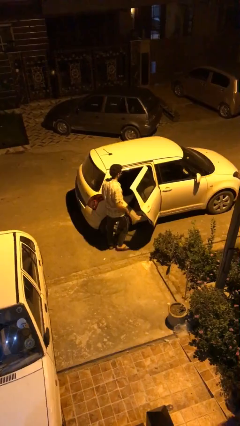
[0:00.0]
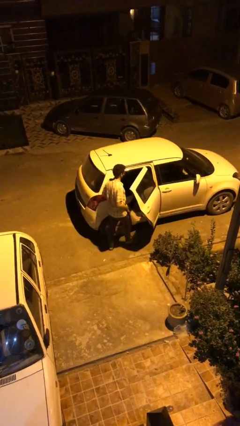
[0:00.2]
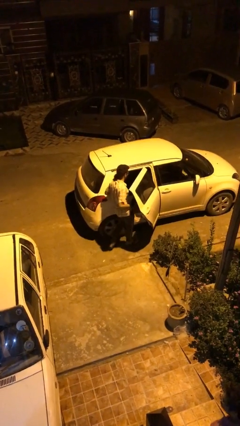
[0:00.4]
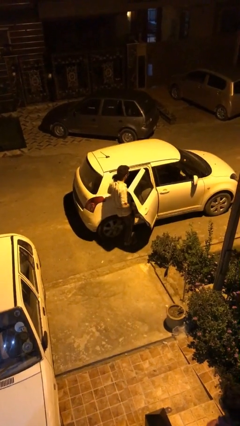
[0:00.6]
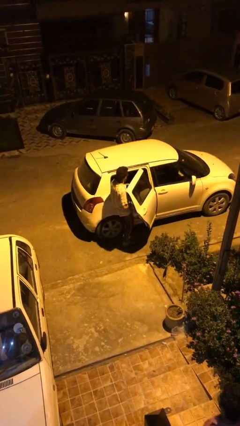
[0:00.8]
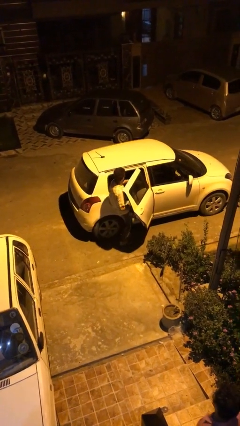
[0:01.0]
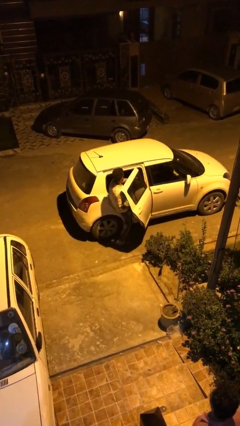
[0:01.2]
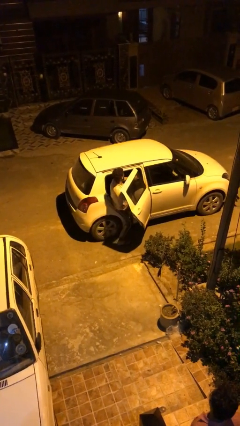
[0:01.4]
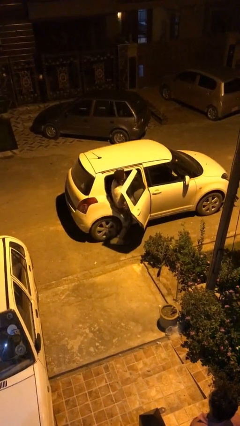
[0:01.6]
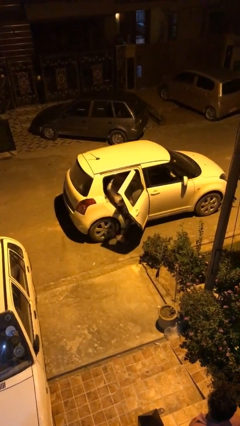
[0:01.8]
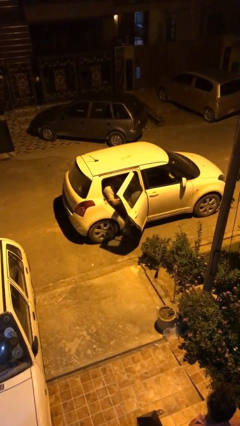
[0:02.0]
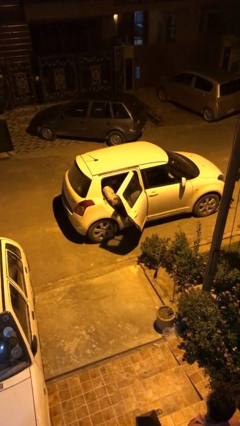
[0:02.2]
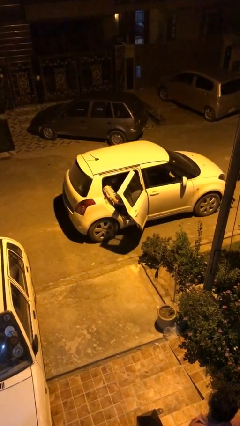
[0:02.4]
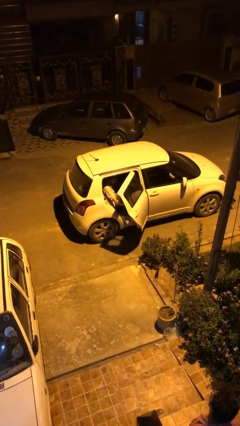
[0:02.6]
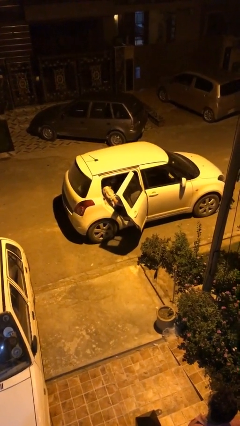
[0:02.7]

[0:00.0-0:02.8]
person enters car

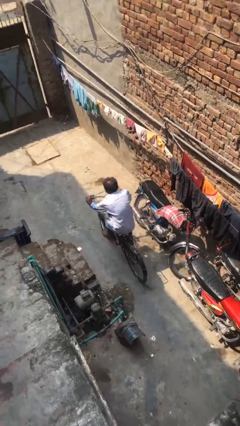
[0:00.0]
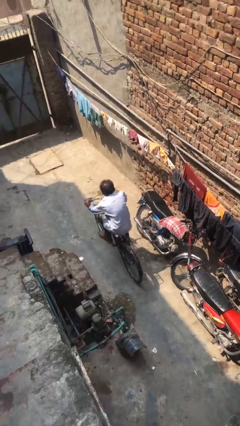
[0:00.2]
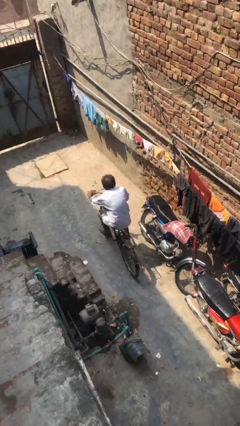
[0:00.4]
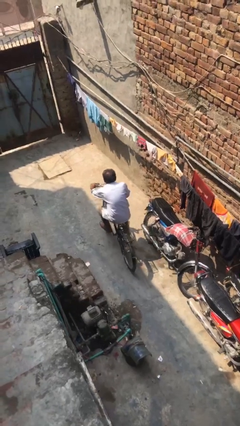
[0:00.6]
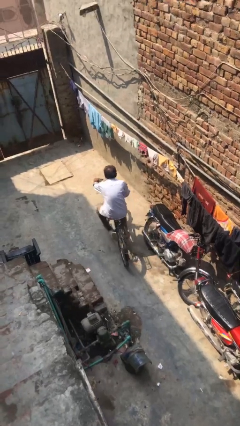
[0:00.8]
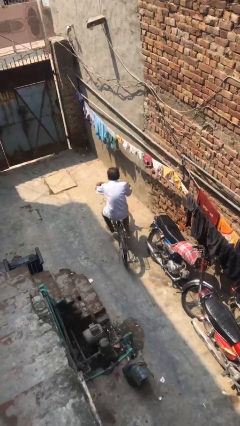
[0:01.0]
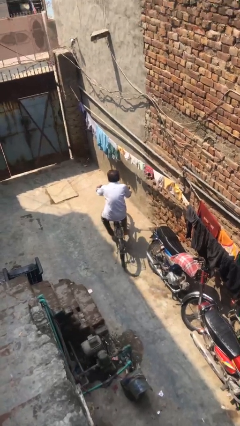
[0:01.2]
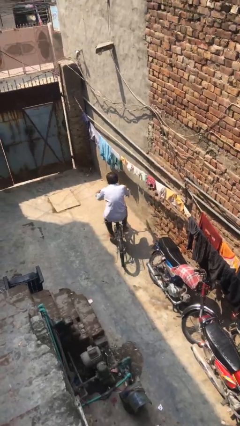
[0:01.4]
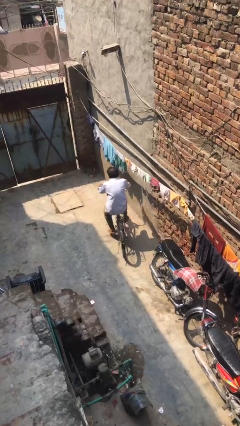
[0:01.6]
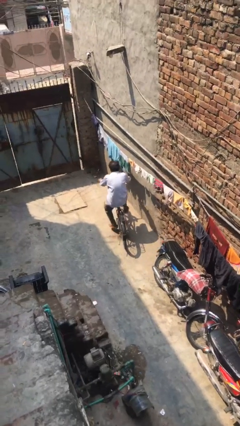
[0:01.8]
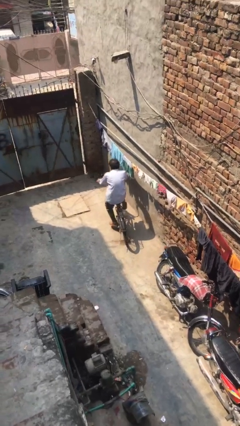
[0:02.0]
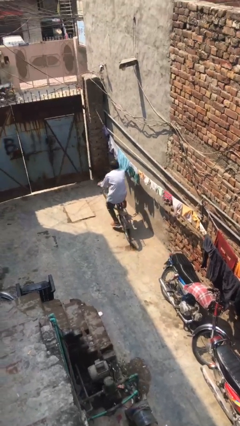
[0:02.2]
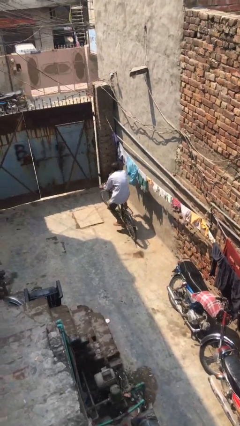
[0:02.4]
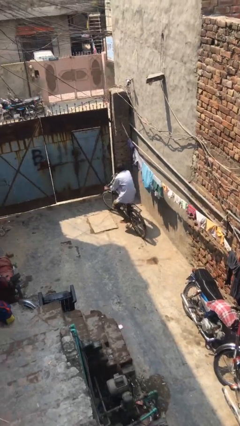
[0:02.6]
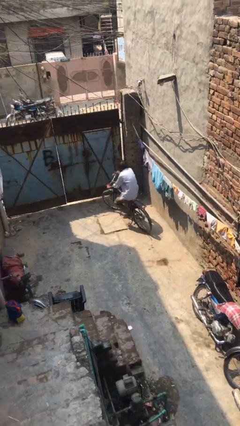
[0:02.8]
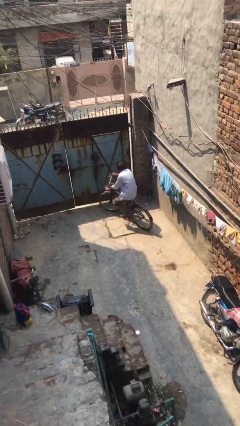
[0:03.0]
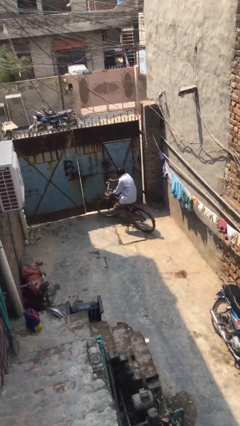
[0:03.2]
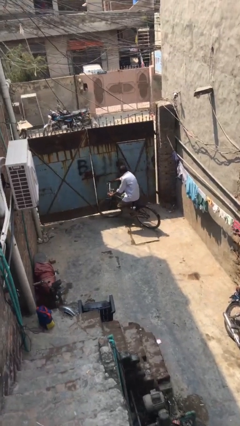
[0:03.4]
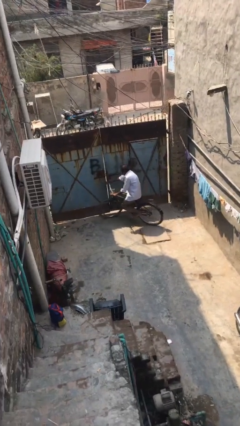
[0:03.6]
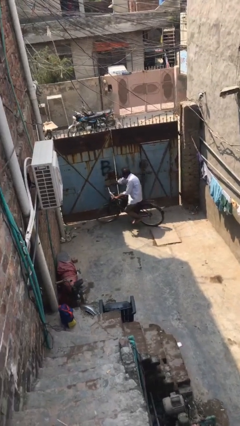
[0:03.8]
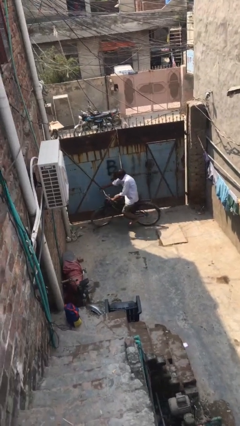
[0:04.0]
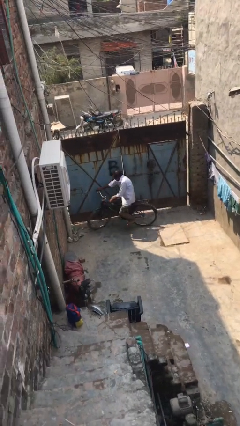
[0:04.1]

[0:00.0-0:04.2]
person rides bicycle

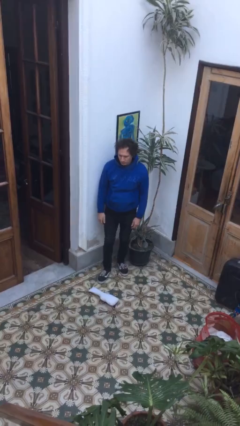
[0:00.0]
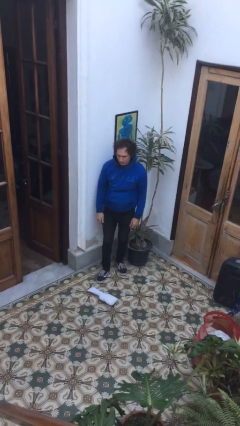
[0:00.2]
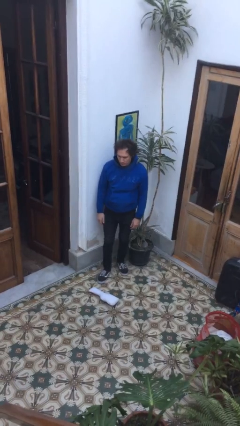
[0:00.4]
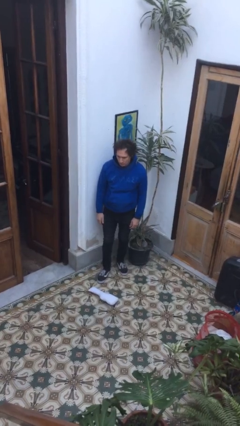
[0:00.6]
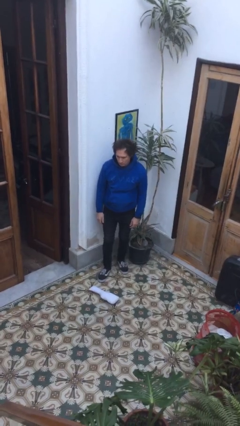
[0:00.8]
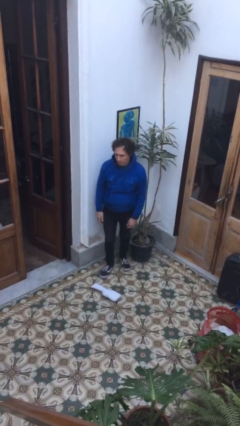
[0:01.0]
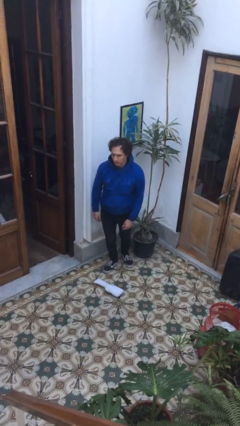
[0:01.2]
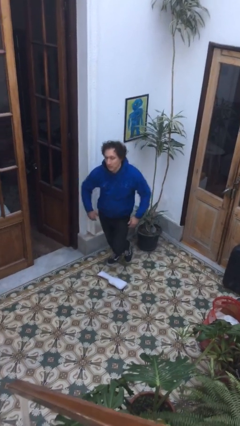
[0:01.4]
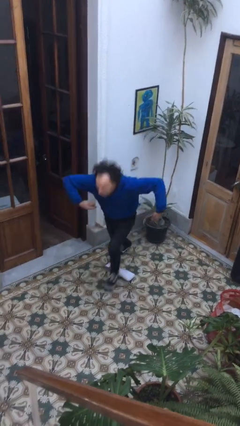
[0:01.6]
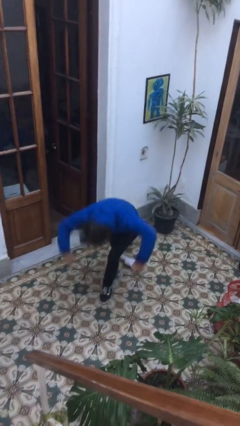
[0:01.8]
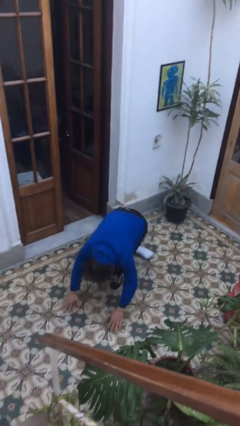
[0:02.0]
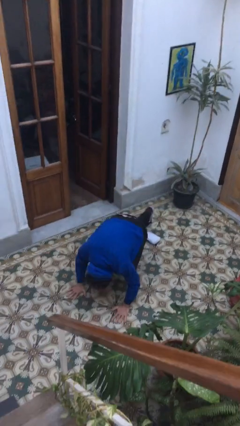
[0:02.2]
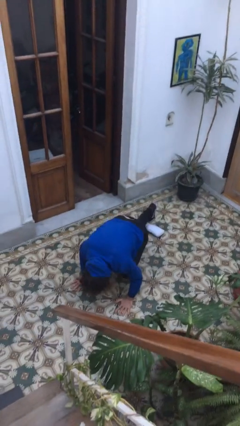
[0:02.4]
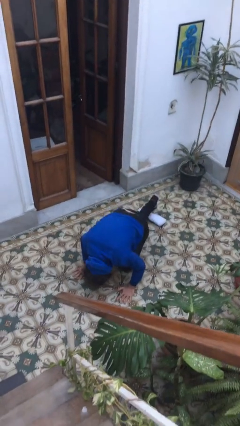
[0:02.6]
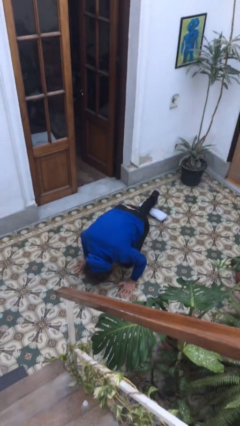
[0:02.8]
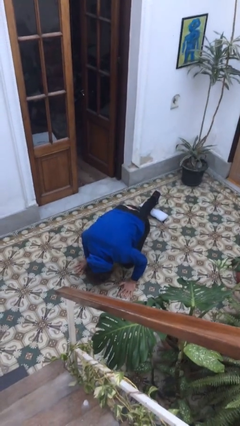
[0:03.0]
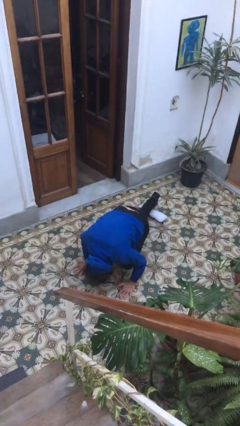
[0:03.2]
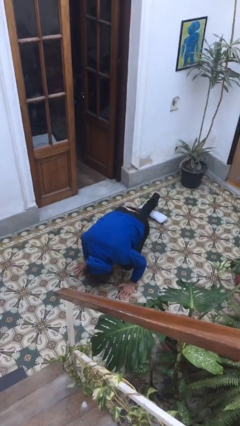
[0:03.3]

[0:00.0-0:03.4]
person trips on object on floor

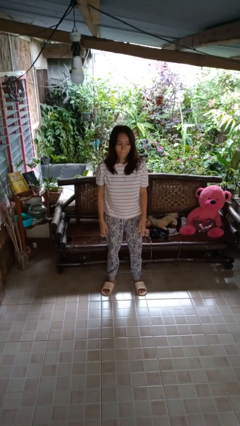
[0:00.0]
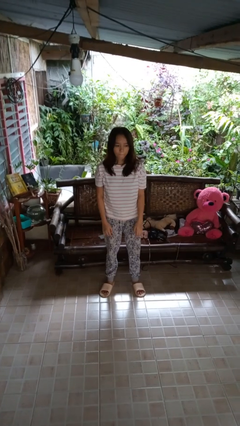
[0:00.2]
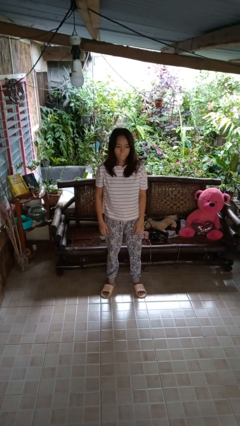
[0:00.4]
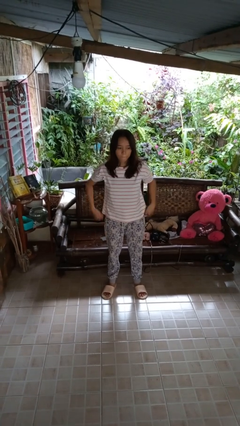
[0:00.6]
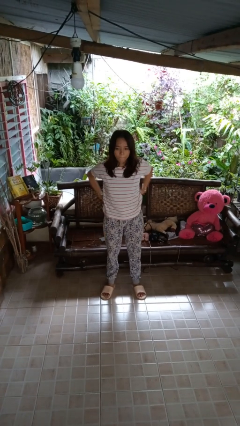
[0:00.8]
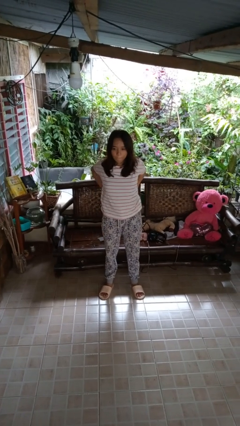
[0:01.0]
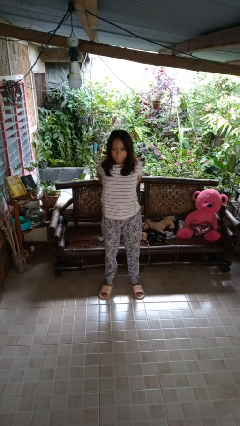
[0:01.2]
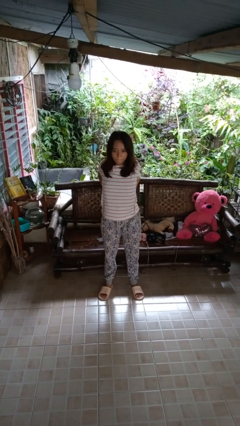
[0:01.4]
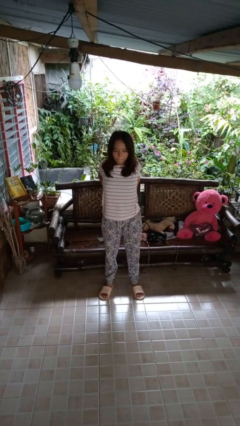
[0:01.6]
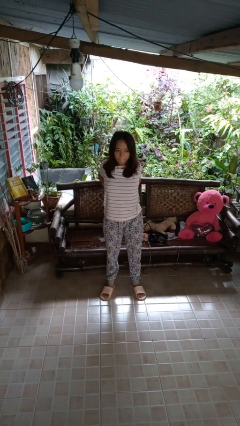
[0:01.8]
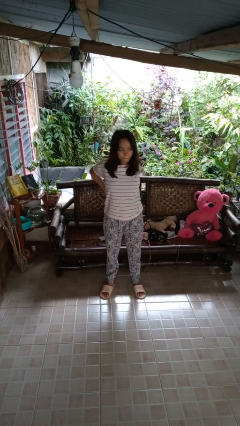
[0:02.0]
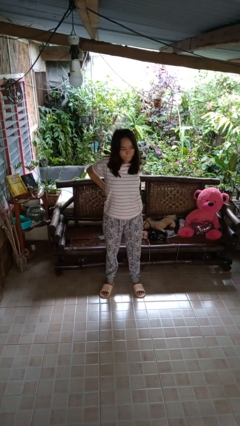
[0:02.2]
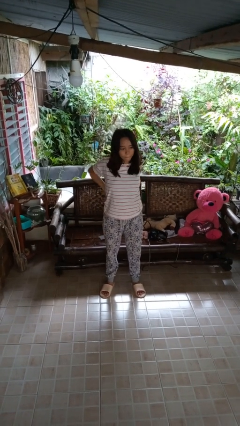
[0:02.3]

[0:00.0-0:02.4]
person stretches back

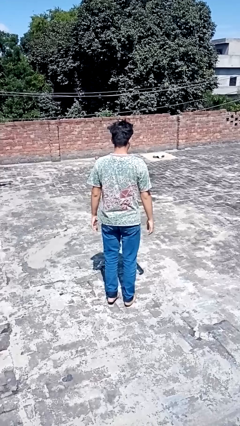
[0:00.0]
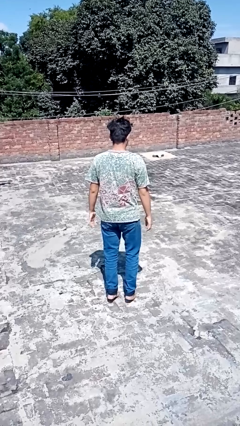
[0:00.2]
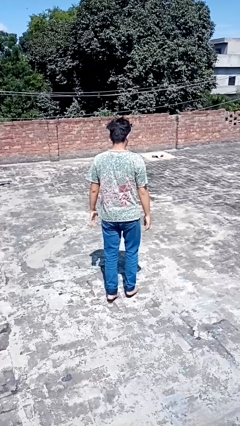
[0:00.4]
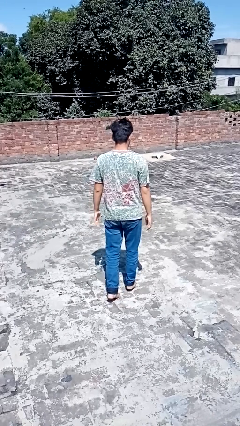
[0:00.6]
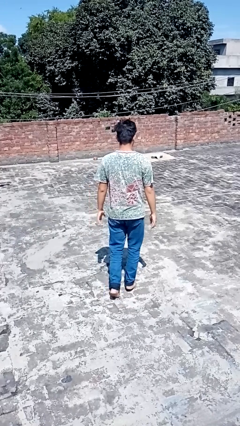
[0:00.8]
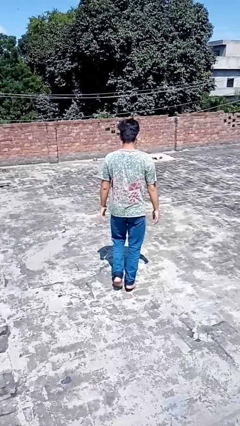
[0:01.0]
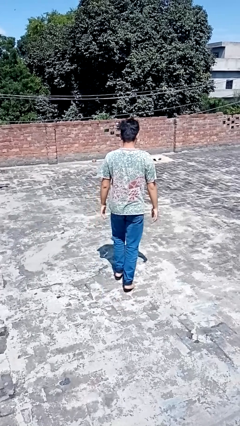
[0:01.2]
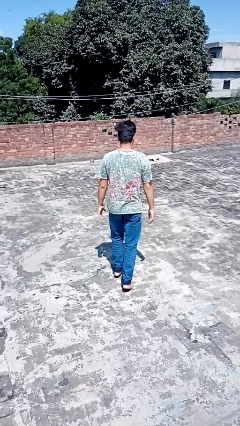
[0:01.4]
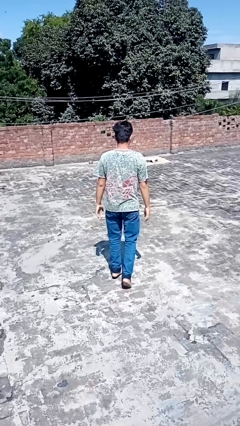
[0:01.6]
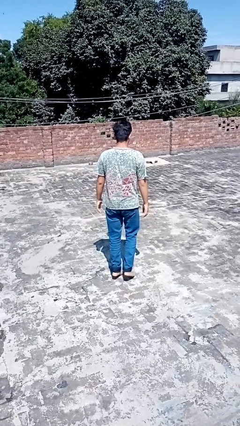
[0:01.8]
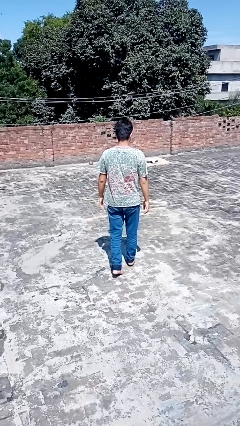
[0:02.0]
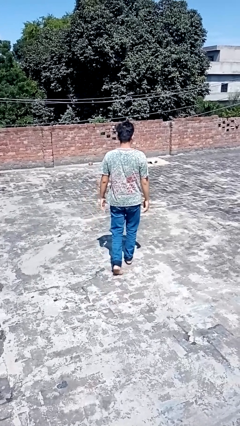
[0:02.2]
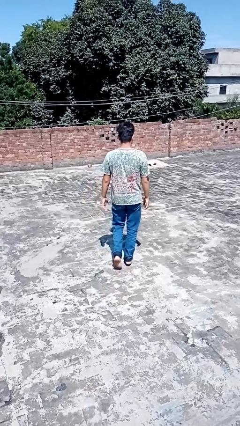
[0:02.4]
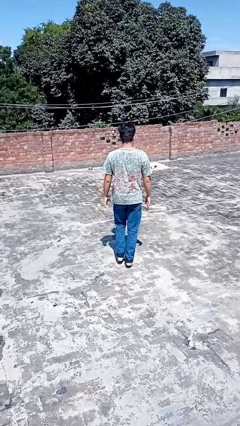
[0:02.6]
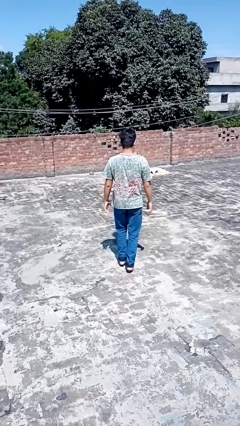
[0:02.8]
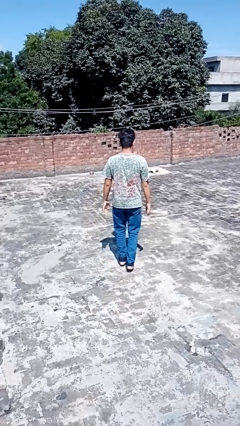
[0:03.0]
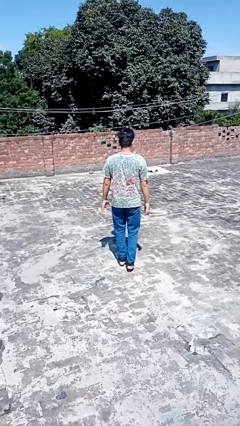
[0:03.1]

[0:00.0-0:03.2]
person walks tiptoe

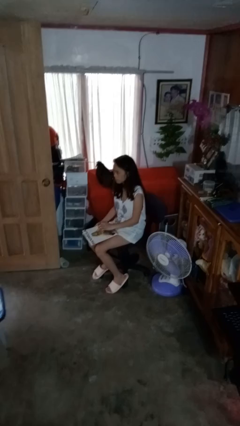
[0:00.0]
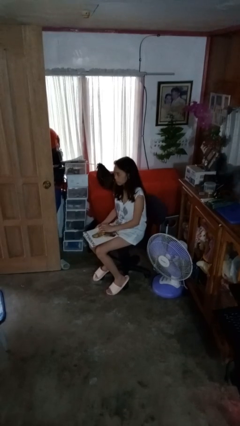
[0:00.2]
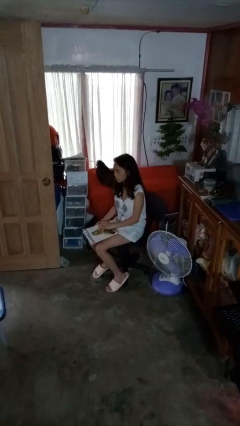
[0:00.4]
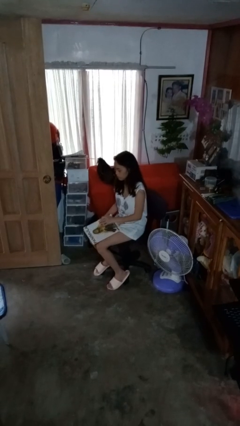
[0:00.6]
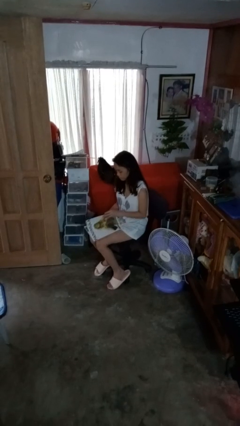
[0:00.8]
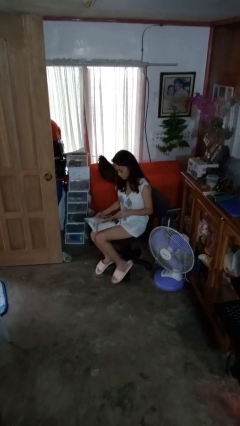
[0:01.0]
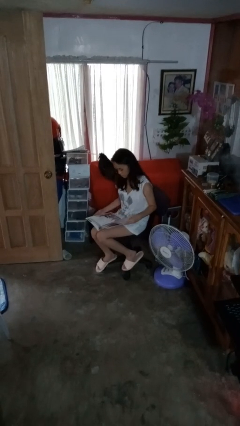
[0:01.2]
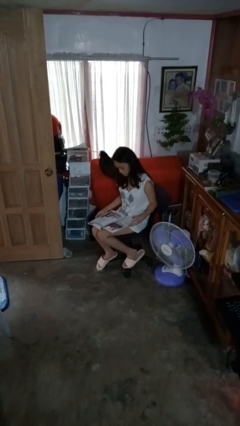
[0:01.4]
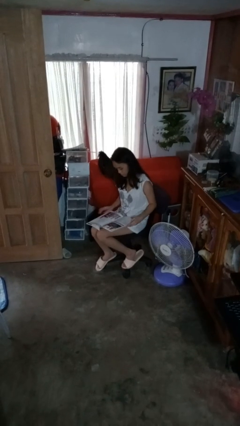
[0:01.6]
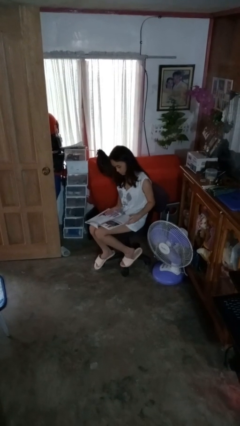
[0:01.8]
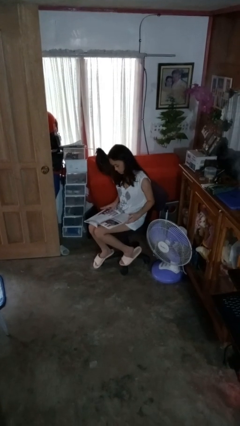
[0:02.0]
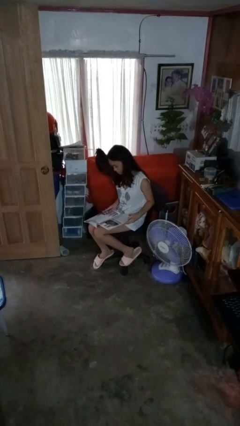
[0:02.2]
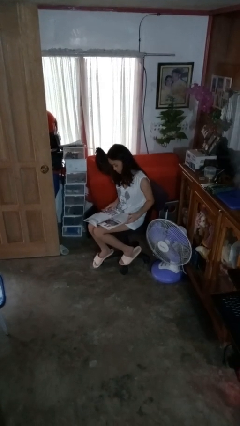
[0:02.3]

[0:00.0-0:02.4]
person reads magazine
